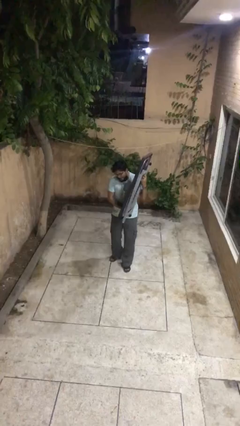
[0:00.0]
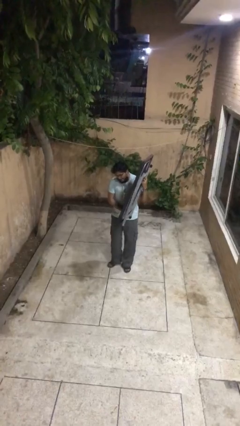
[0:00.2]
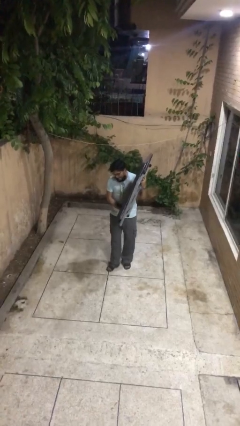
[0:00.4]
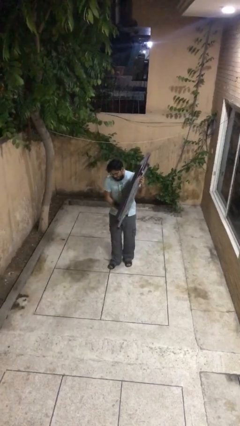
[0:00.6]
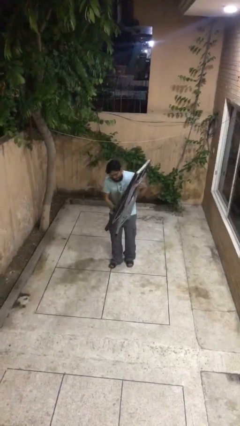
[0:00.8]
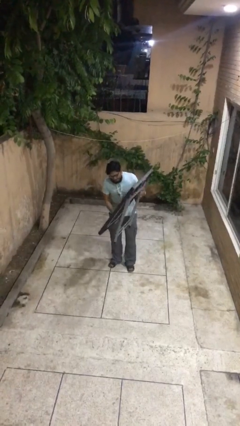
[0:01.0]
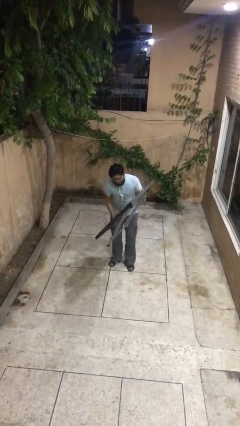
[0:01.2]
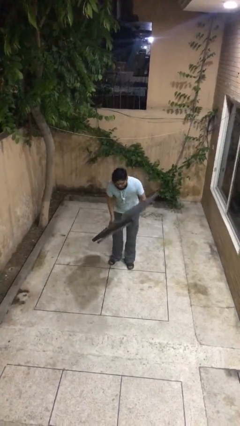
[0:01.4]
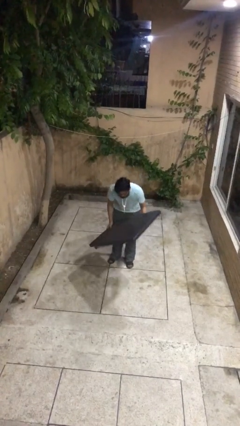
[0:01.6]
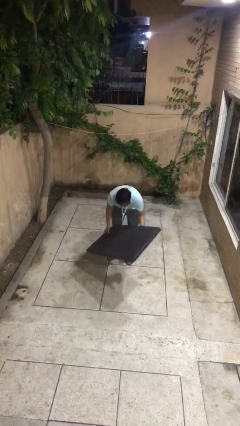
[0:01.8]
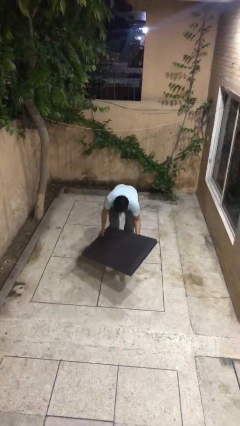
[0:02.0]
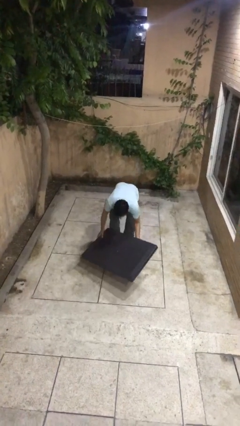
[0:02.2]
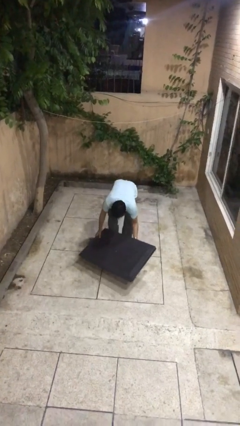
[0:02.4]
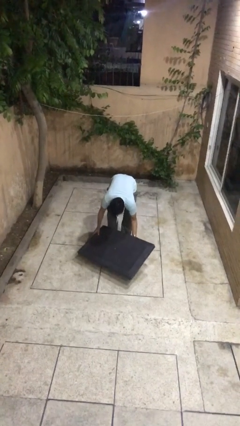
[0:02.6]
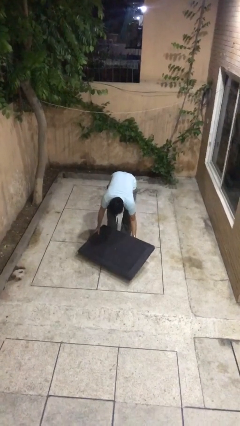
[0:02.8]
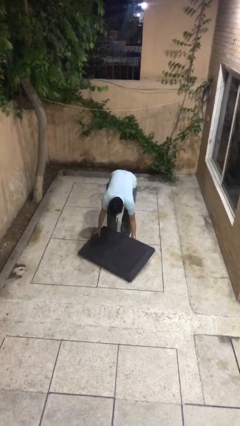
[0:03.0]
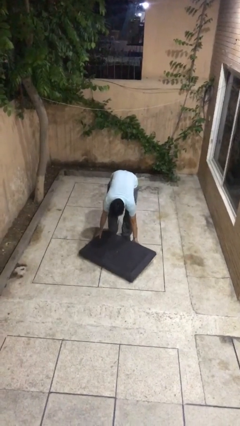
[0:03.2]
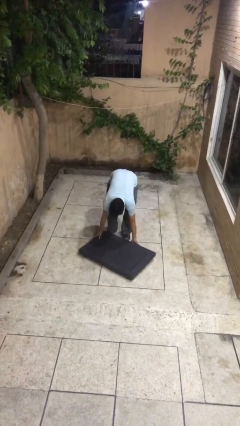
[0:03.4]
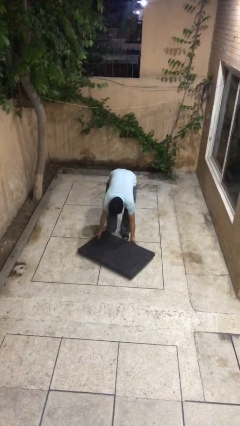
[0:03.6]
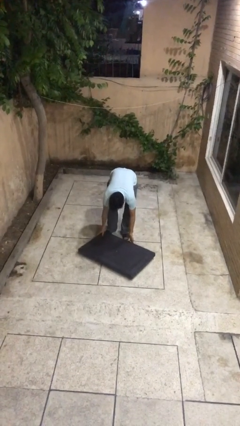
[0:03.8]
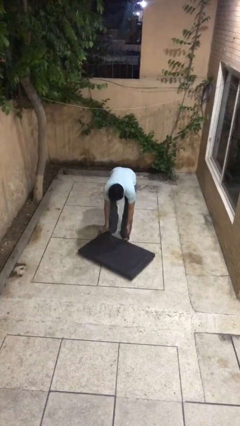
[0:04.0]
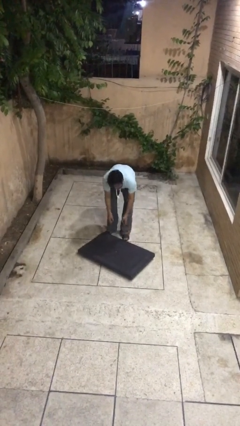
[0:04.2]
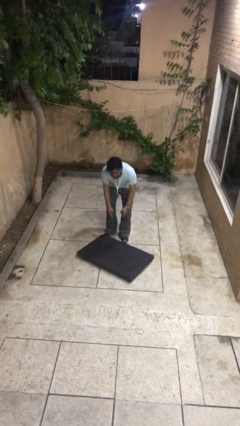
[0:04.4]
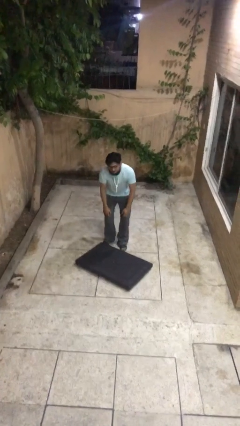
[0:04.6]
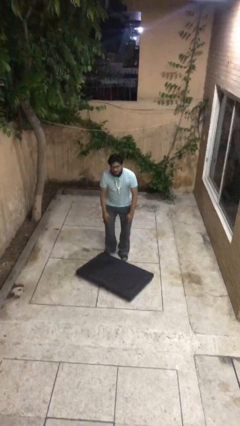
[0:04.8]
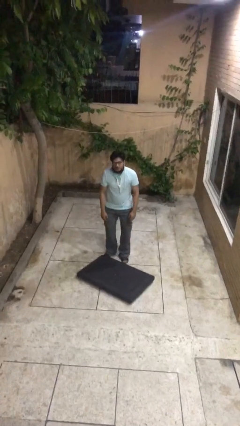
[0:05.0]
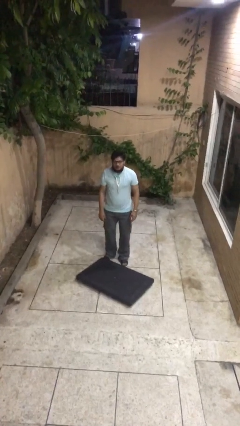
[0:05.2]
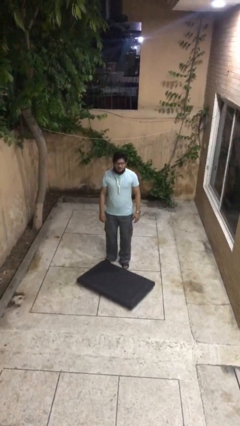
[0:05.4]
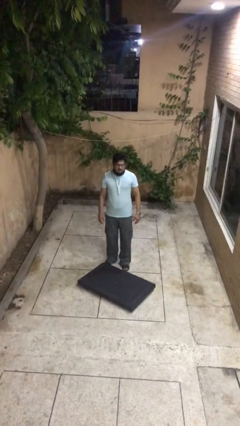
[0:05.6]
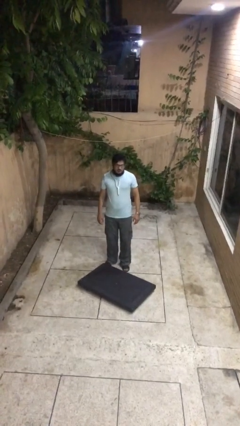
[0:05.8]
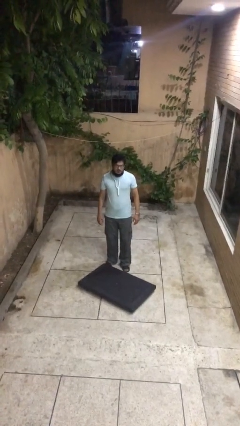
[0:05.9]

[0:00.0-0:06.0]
person puts down object on floor

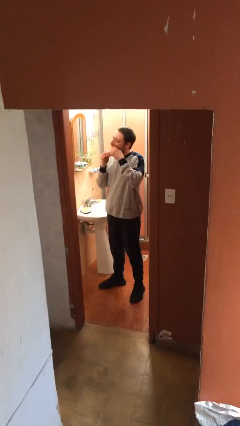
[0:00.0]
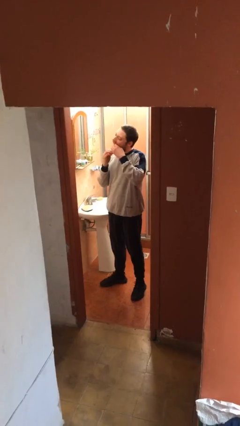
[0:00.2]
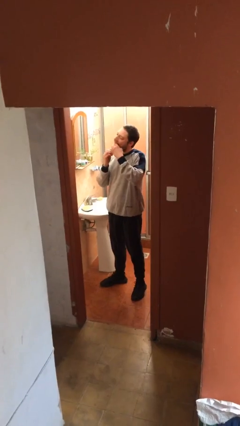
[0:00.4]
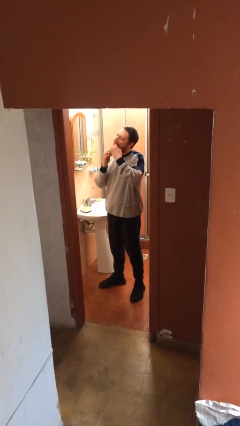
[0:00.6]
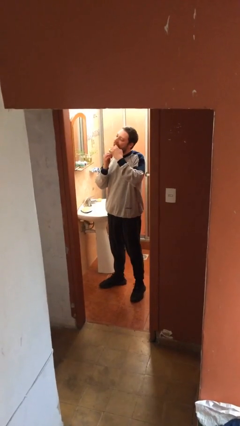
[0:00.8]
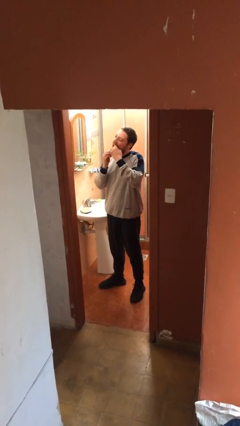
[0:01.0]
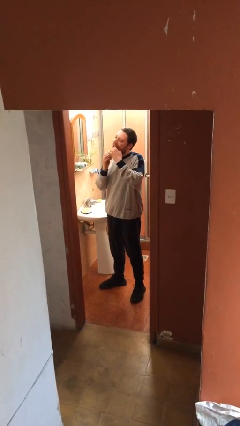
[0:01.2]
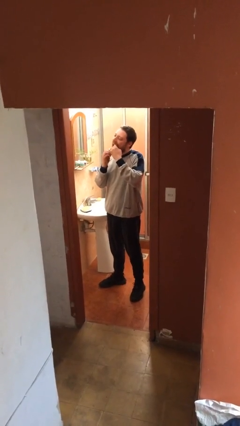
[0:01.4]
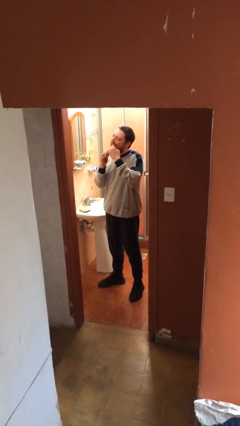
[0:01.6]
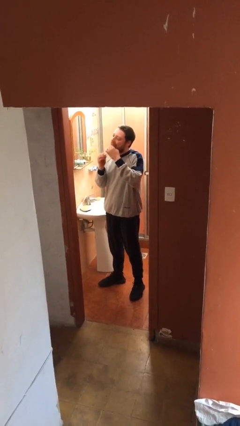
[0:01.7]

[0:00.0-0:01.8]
person flosses

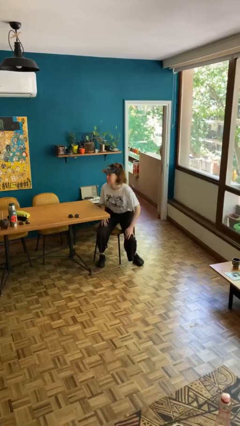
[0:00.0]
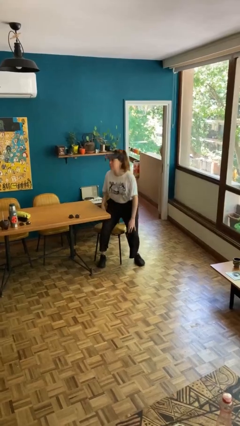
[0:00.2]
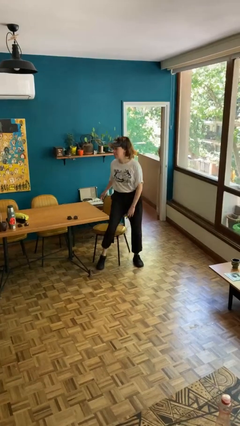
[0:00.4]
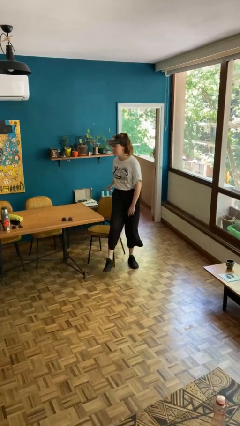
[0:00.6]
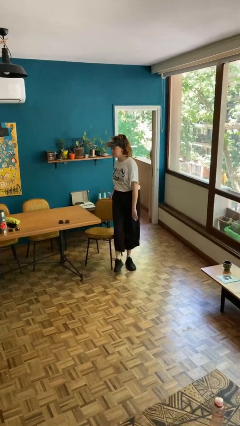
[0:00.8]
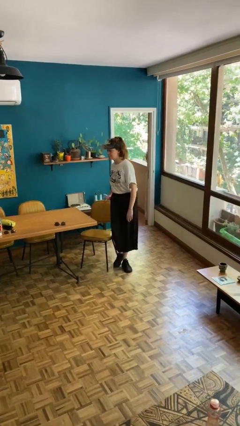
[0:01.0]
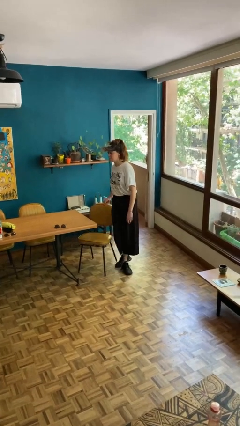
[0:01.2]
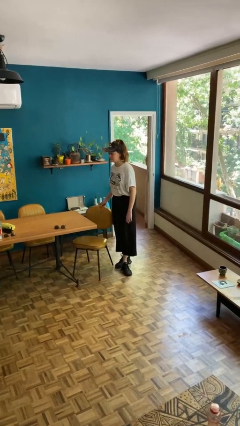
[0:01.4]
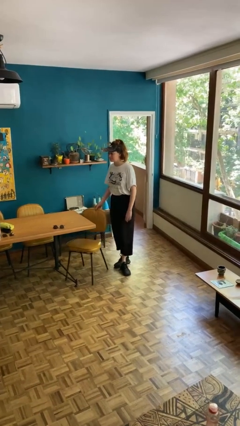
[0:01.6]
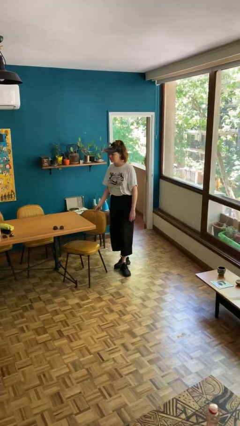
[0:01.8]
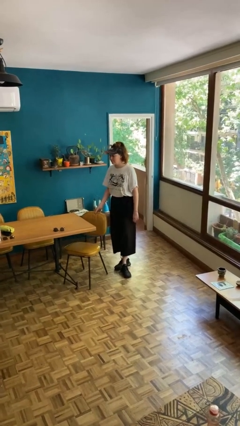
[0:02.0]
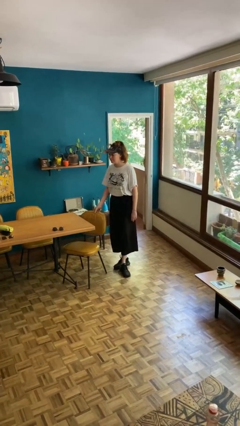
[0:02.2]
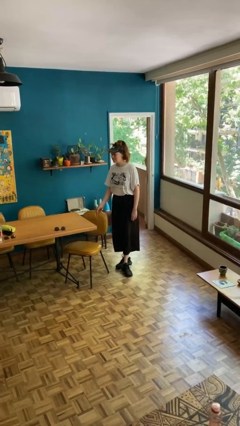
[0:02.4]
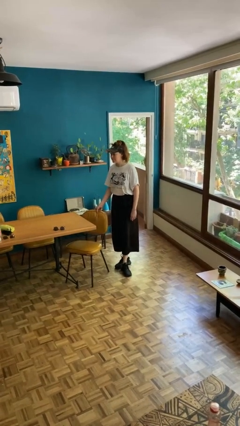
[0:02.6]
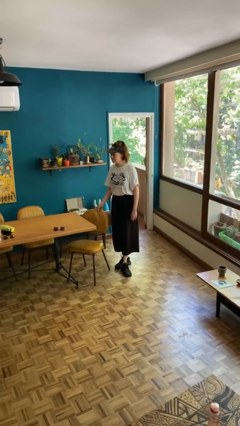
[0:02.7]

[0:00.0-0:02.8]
person stands up

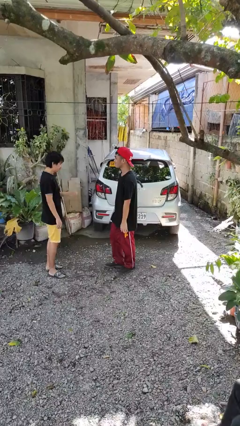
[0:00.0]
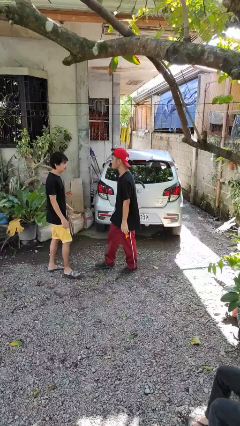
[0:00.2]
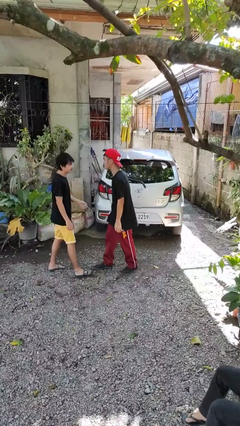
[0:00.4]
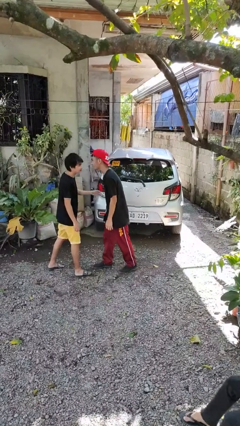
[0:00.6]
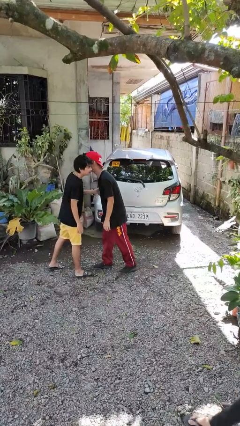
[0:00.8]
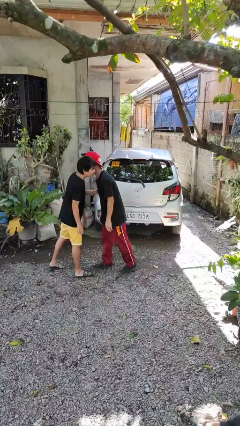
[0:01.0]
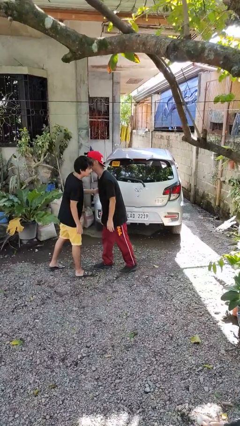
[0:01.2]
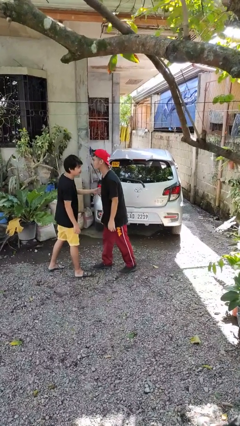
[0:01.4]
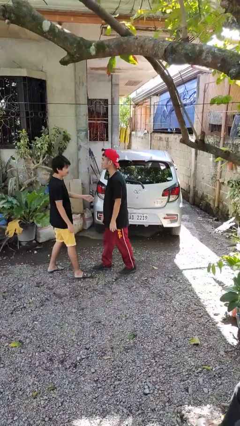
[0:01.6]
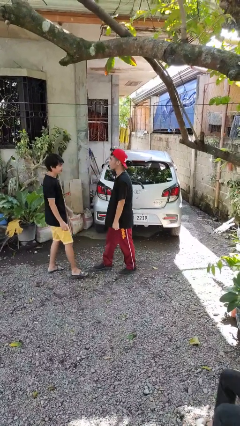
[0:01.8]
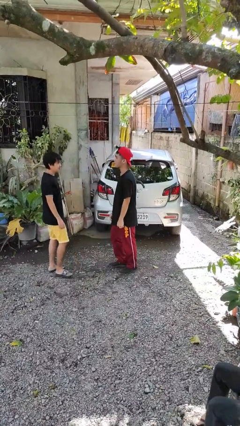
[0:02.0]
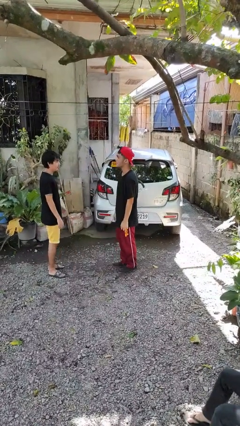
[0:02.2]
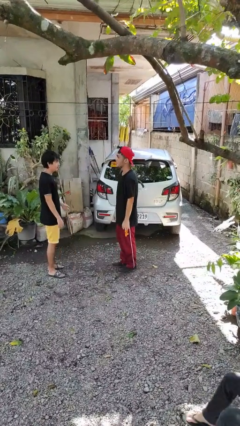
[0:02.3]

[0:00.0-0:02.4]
person kisses cheek of person

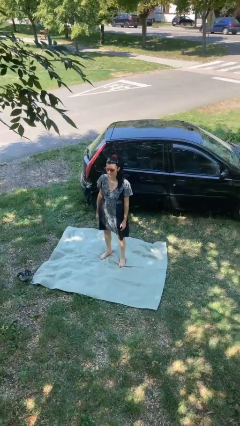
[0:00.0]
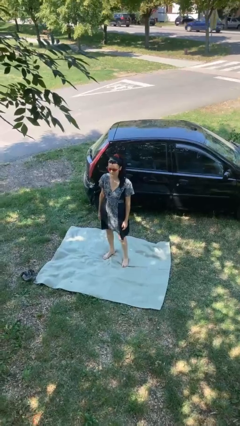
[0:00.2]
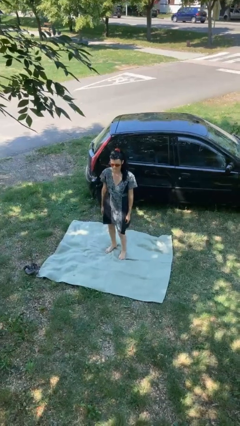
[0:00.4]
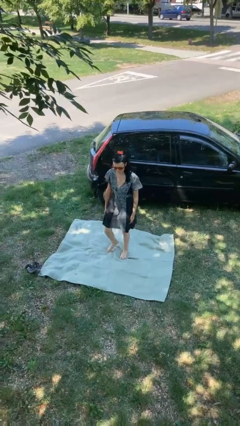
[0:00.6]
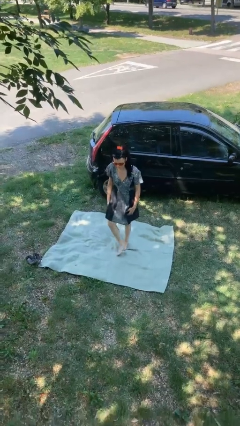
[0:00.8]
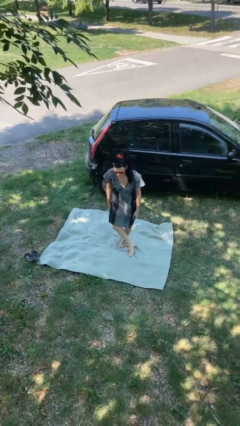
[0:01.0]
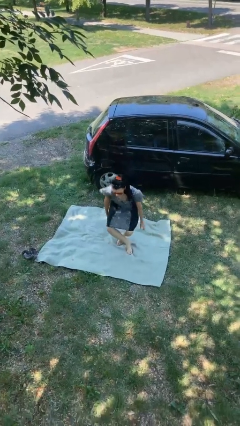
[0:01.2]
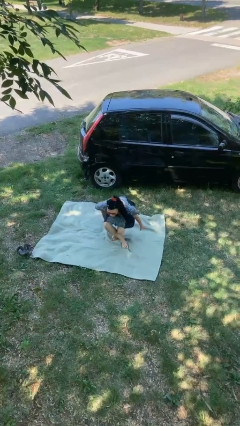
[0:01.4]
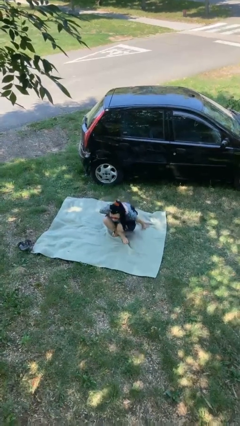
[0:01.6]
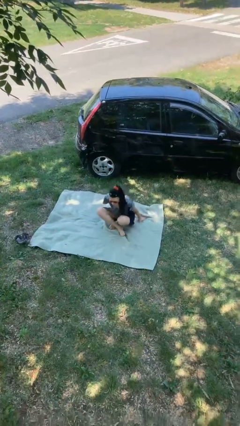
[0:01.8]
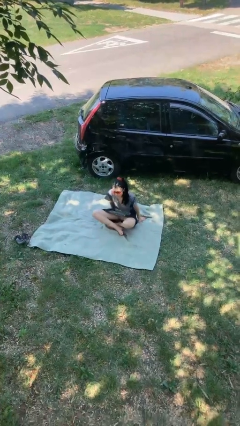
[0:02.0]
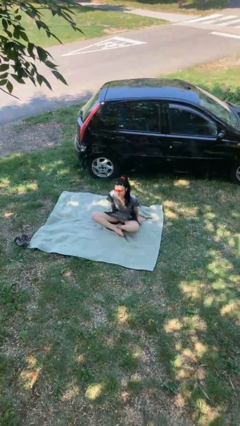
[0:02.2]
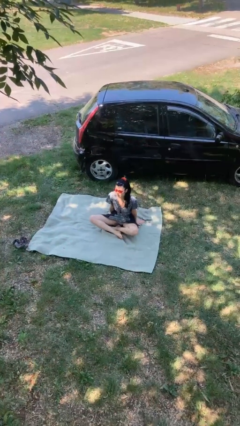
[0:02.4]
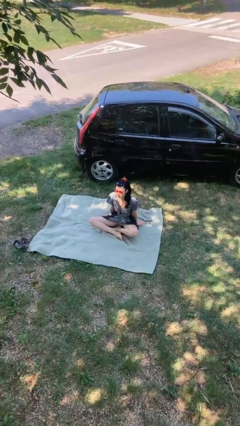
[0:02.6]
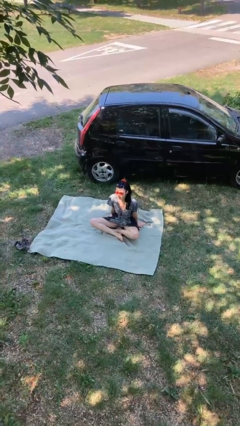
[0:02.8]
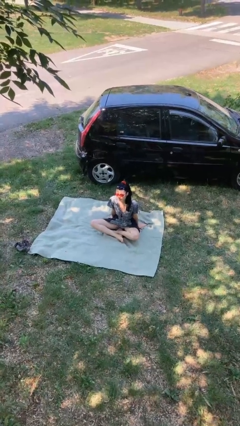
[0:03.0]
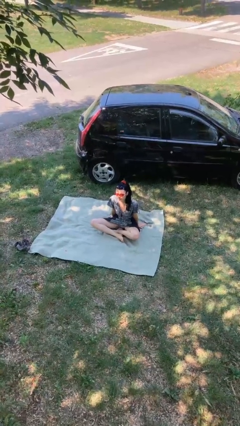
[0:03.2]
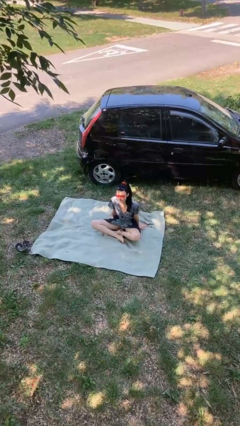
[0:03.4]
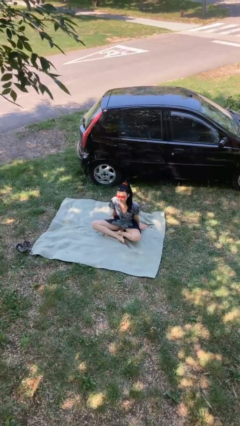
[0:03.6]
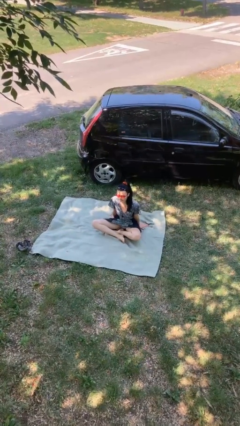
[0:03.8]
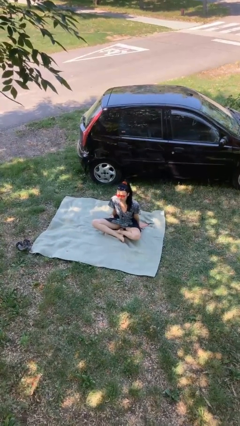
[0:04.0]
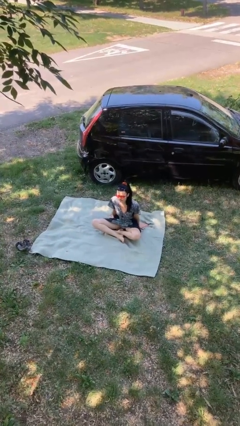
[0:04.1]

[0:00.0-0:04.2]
person sits crisscross
